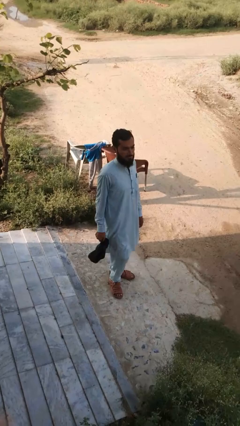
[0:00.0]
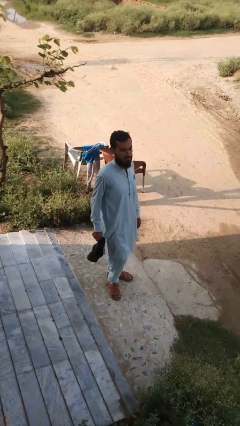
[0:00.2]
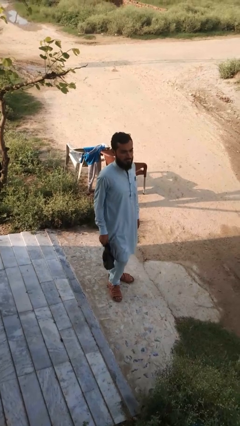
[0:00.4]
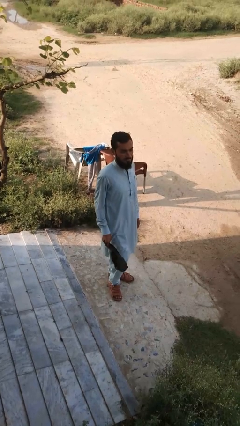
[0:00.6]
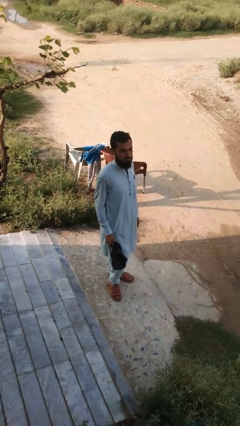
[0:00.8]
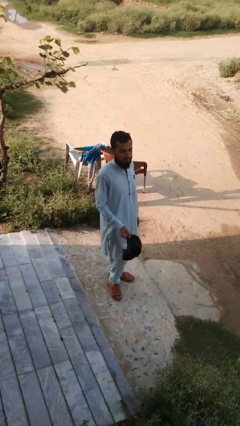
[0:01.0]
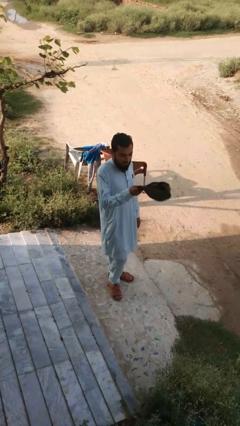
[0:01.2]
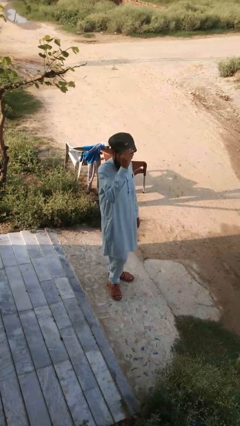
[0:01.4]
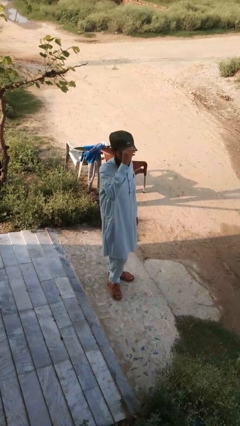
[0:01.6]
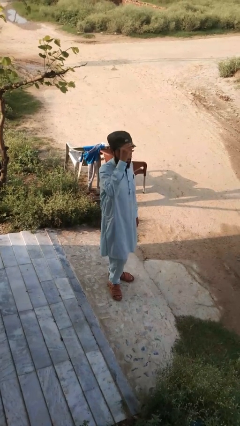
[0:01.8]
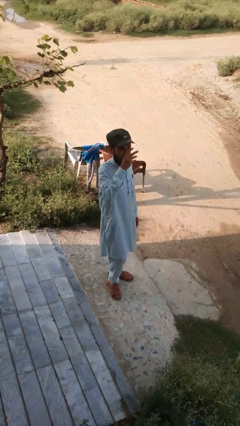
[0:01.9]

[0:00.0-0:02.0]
person puts on hat

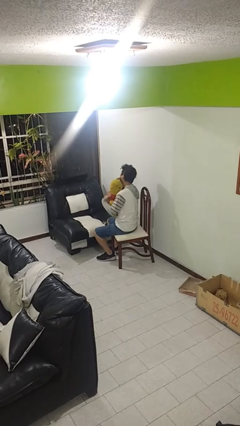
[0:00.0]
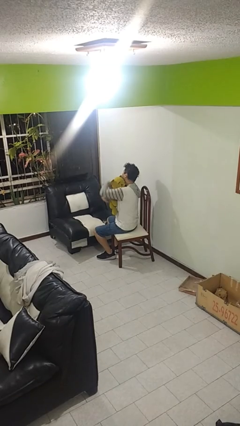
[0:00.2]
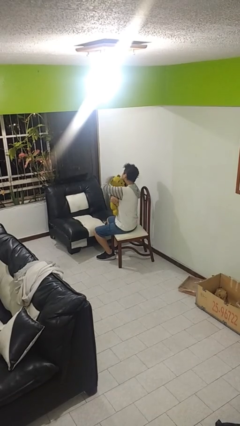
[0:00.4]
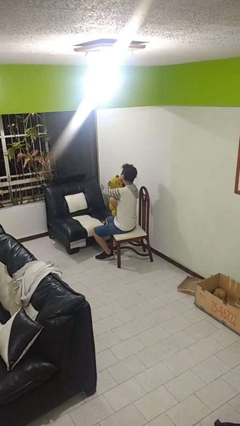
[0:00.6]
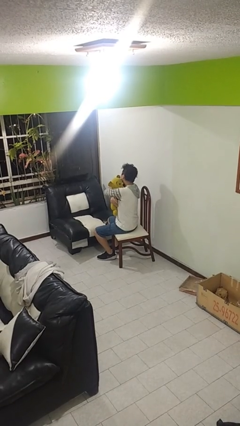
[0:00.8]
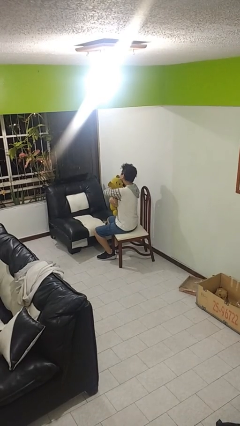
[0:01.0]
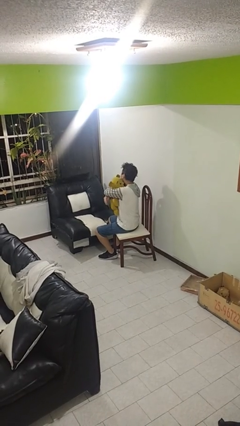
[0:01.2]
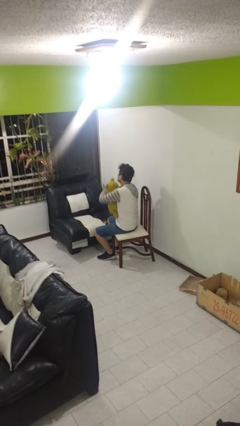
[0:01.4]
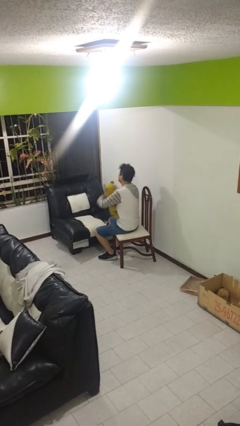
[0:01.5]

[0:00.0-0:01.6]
person hugs stuffed animal

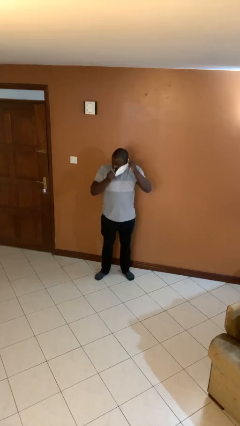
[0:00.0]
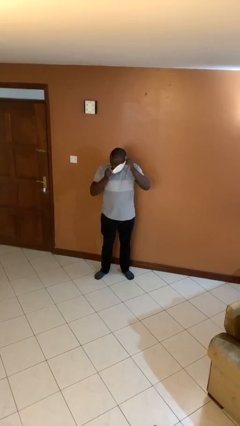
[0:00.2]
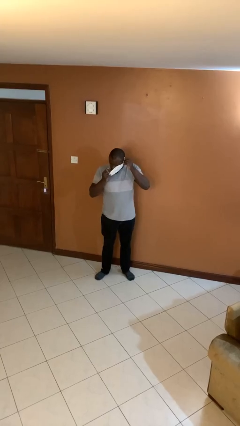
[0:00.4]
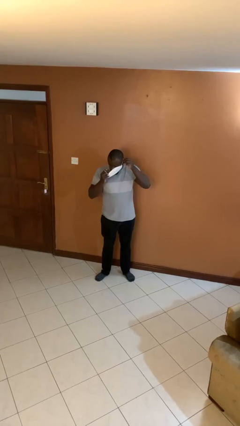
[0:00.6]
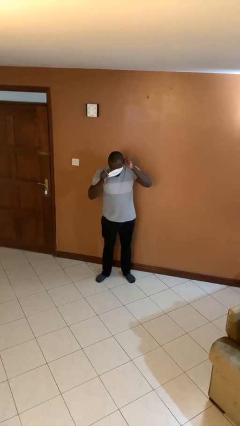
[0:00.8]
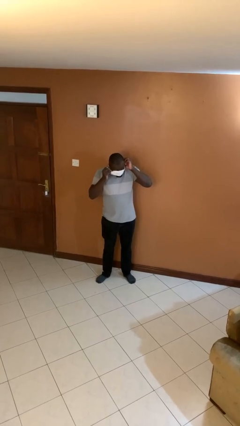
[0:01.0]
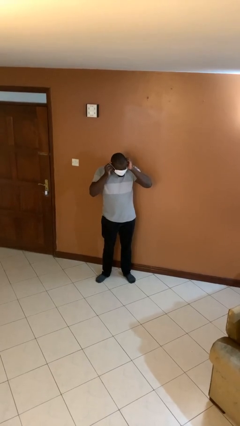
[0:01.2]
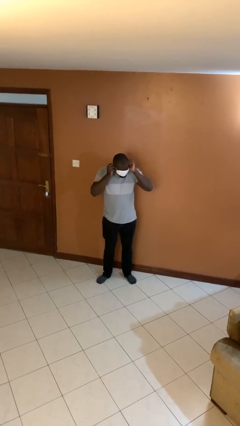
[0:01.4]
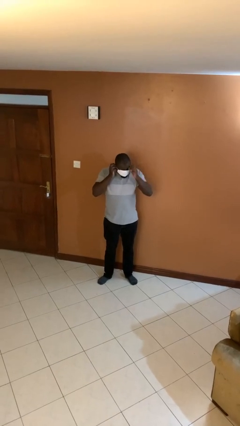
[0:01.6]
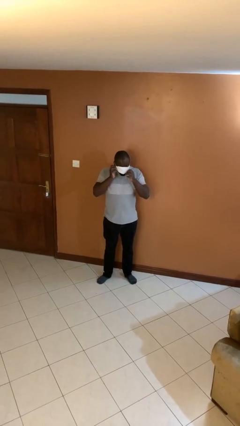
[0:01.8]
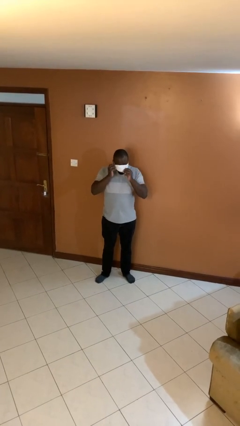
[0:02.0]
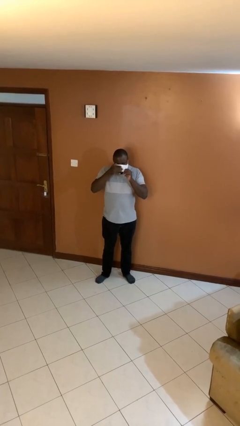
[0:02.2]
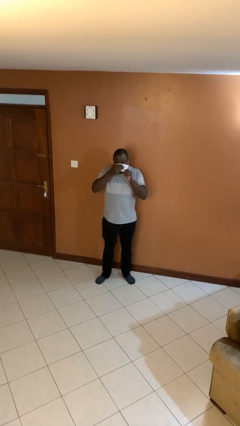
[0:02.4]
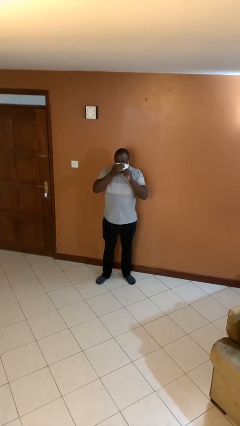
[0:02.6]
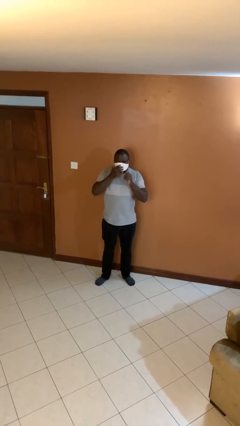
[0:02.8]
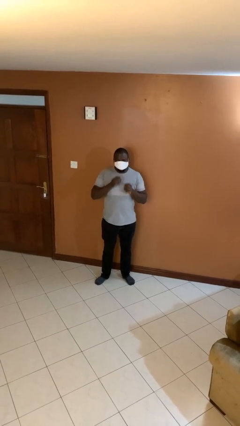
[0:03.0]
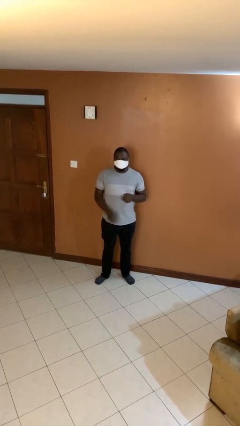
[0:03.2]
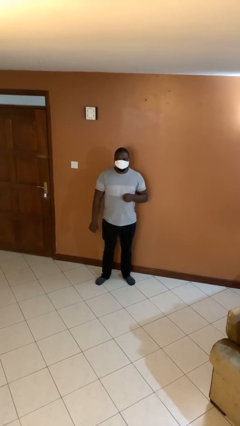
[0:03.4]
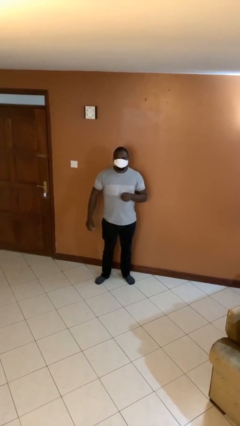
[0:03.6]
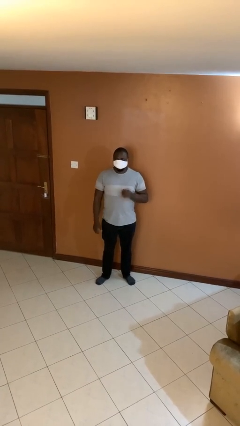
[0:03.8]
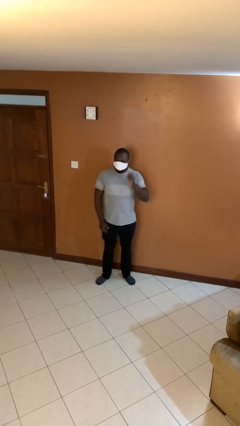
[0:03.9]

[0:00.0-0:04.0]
person puts on facemask

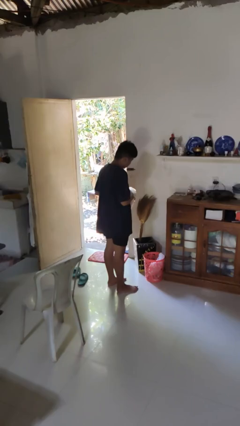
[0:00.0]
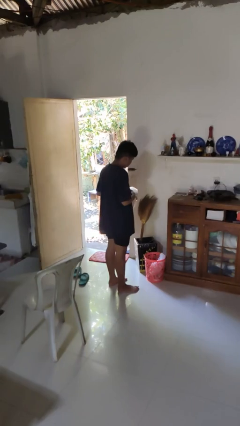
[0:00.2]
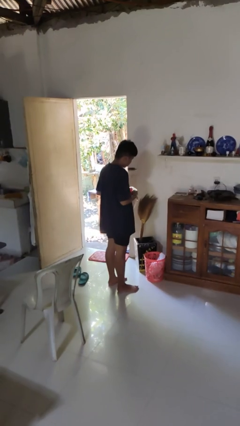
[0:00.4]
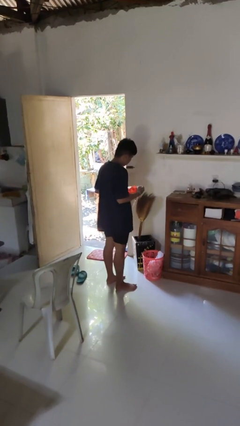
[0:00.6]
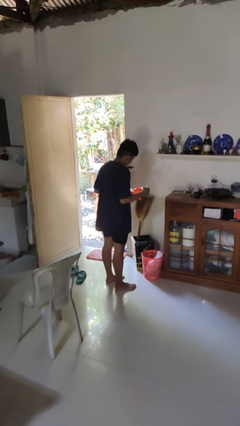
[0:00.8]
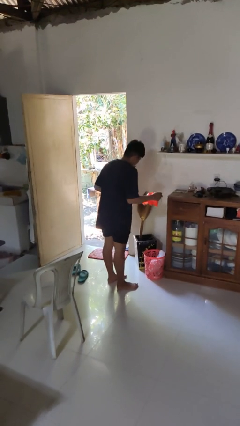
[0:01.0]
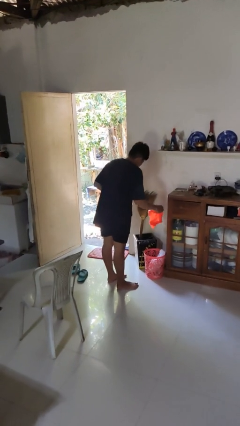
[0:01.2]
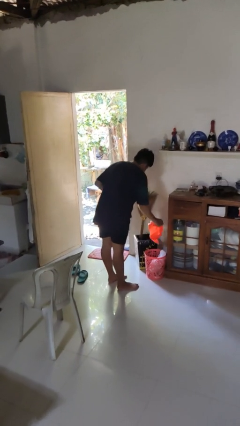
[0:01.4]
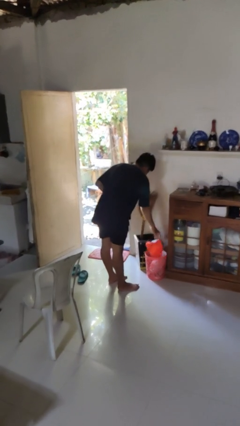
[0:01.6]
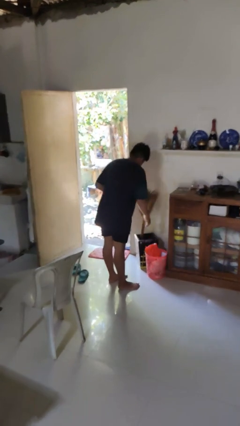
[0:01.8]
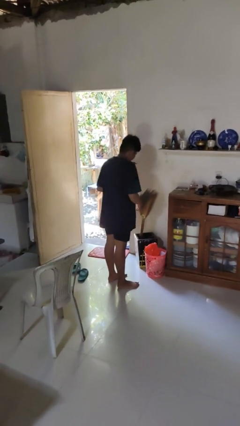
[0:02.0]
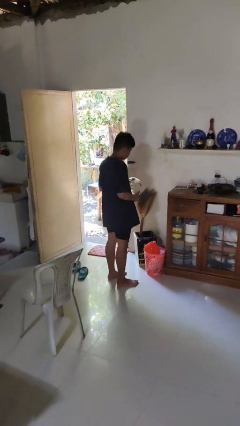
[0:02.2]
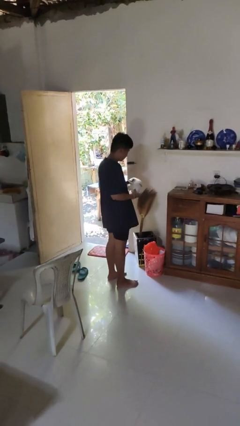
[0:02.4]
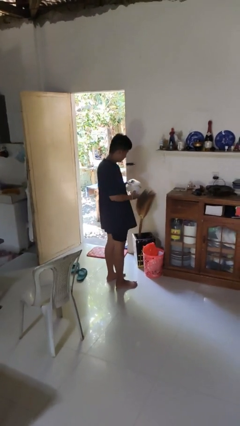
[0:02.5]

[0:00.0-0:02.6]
person discards trash

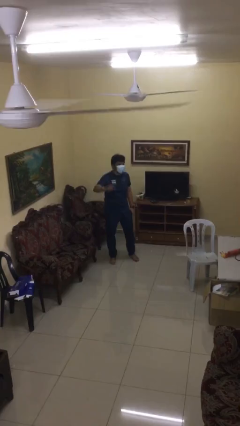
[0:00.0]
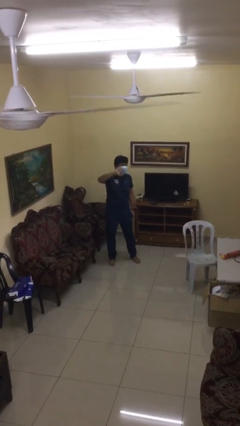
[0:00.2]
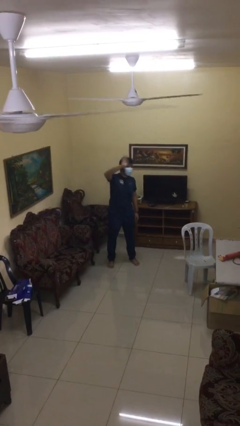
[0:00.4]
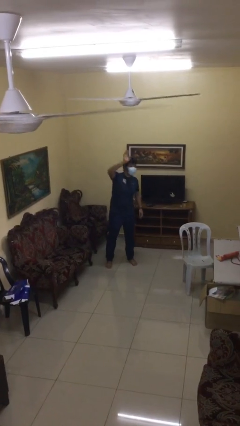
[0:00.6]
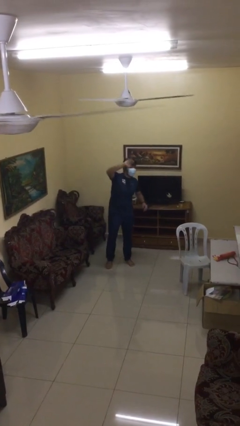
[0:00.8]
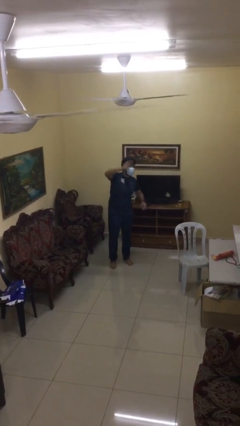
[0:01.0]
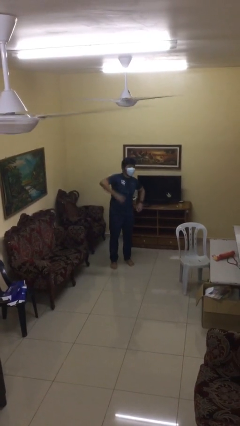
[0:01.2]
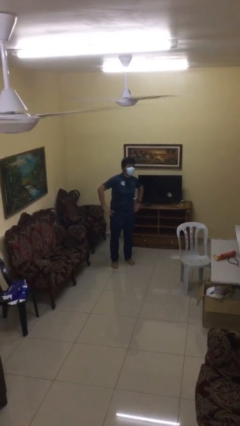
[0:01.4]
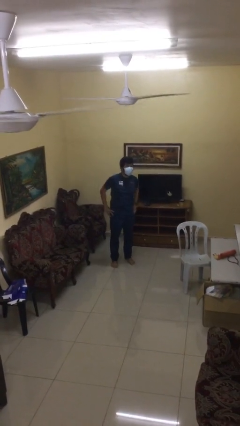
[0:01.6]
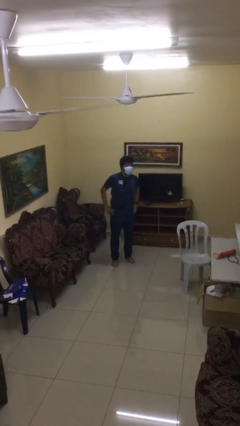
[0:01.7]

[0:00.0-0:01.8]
person waves at person

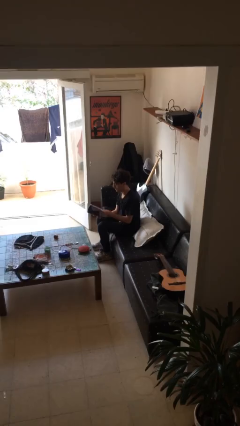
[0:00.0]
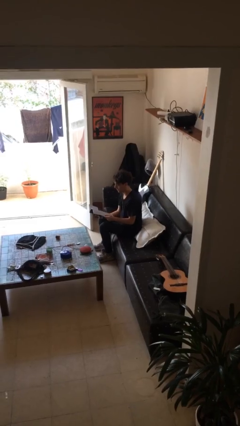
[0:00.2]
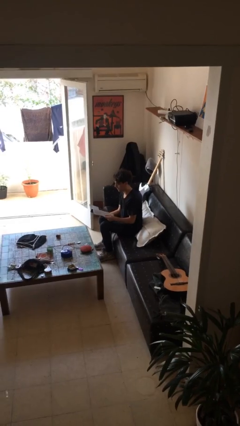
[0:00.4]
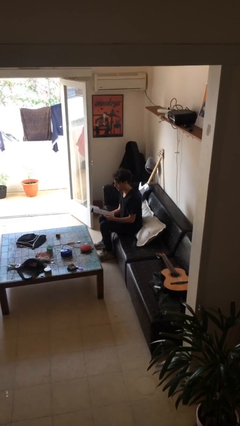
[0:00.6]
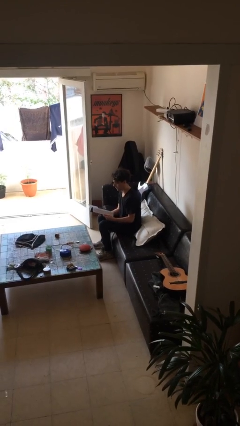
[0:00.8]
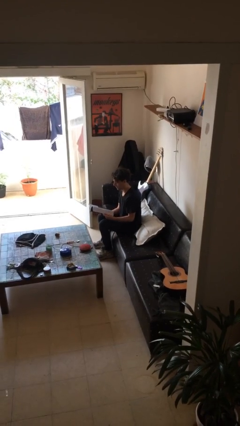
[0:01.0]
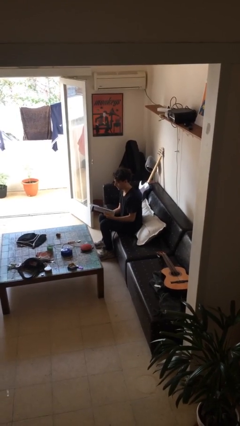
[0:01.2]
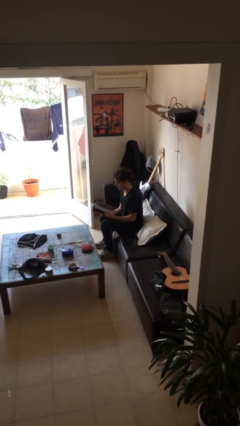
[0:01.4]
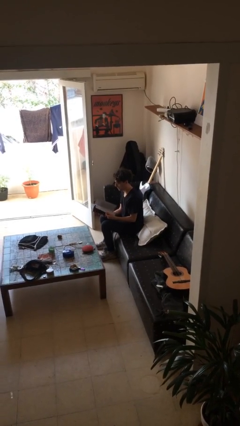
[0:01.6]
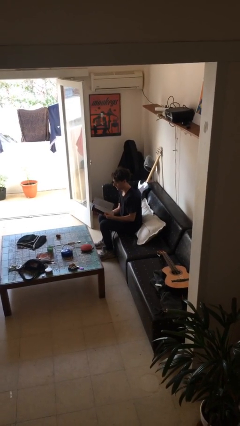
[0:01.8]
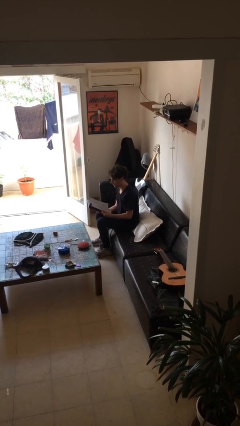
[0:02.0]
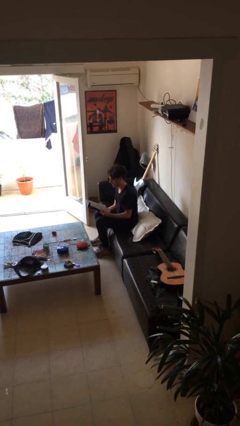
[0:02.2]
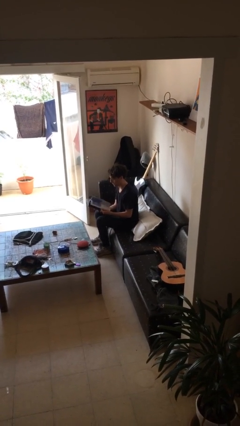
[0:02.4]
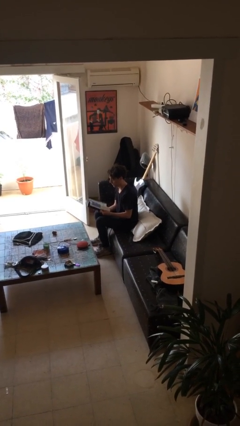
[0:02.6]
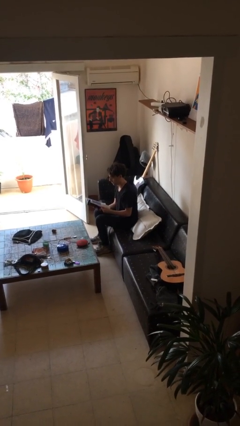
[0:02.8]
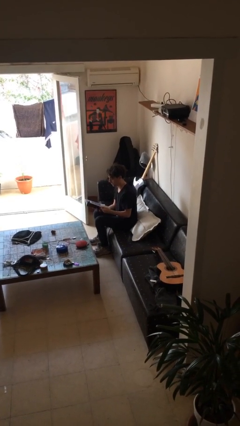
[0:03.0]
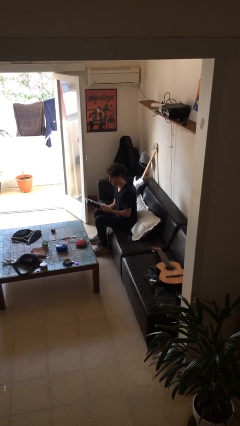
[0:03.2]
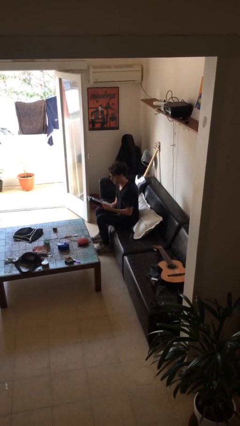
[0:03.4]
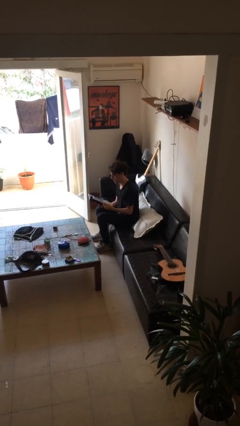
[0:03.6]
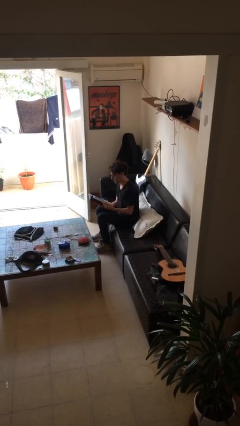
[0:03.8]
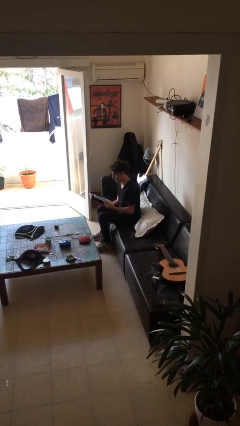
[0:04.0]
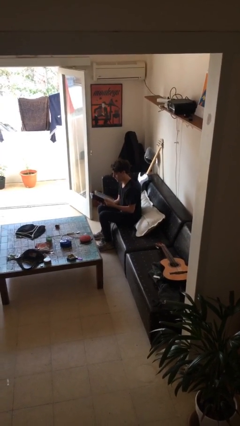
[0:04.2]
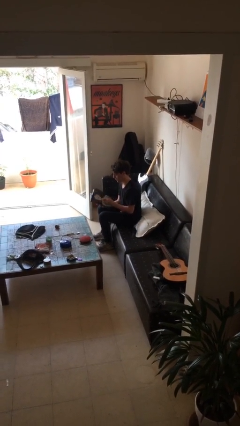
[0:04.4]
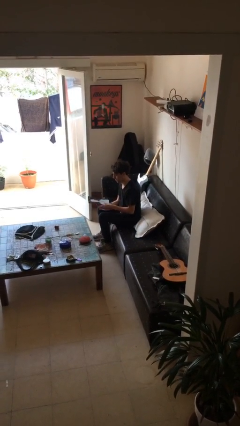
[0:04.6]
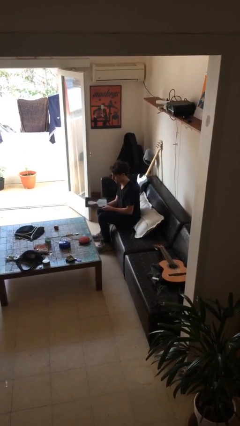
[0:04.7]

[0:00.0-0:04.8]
person reads document

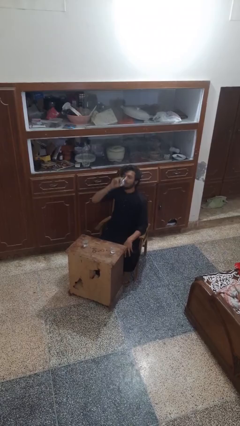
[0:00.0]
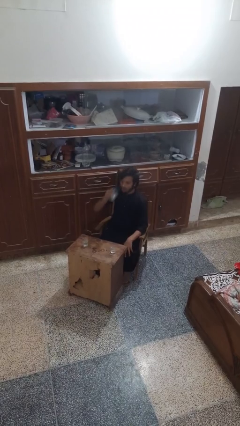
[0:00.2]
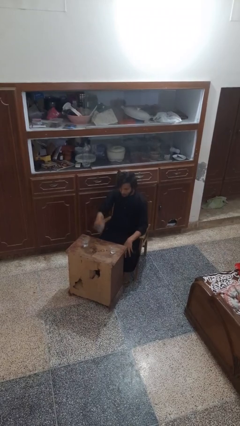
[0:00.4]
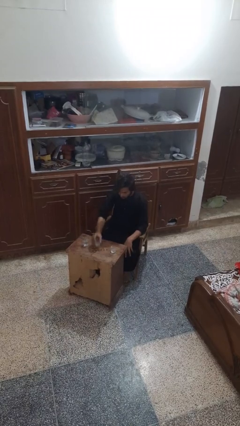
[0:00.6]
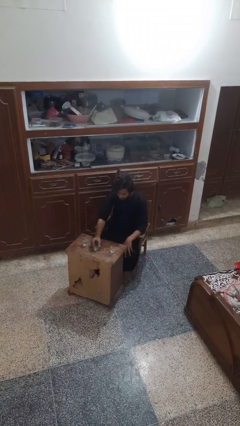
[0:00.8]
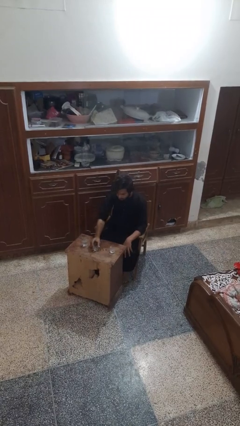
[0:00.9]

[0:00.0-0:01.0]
person puts down object on table
